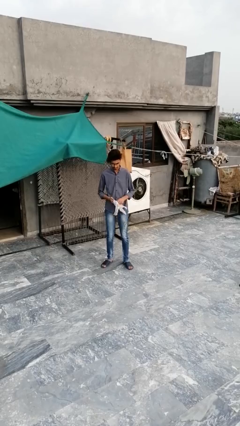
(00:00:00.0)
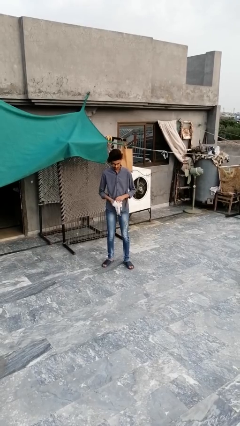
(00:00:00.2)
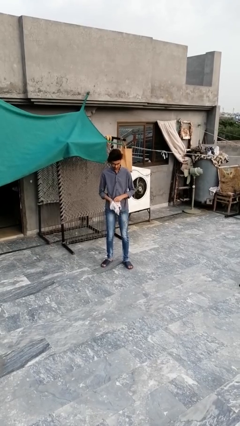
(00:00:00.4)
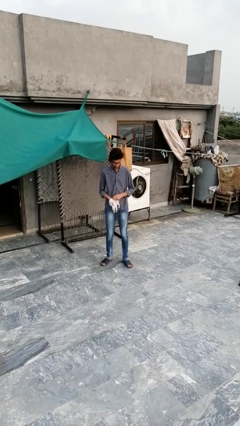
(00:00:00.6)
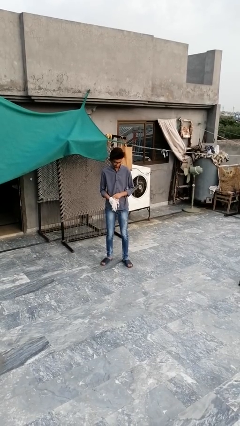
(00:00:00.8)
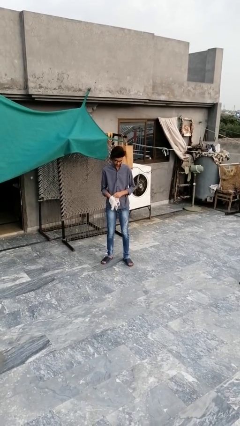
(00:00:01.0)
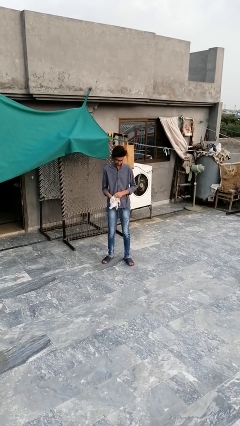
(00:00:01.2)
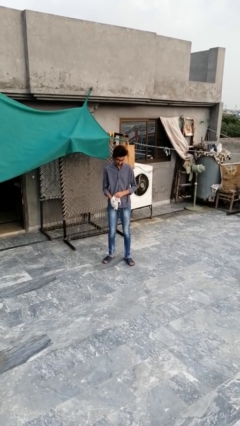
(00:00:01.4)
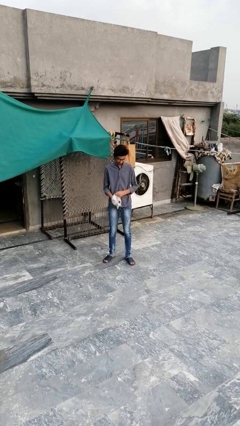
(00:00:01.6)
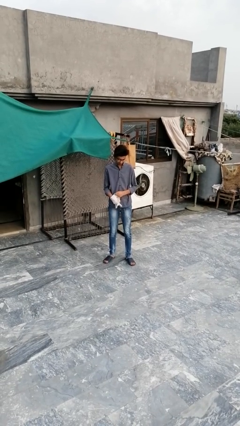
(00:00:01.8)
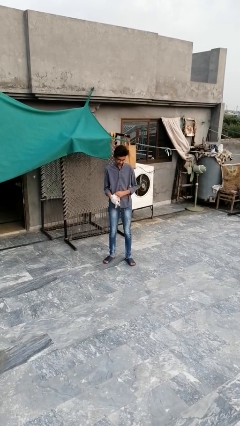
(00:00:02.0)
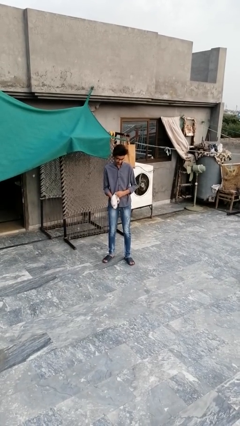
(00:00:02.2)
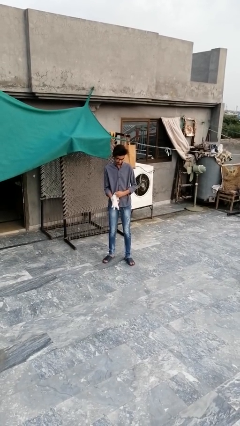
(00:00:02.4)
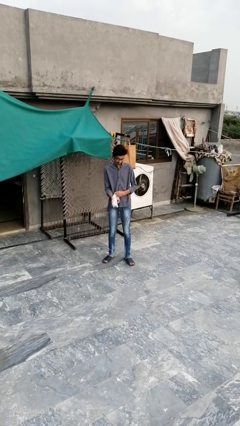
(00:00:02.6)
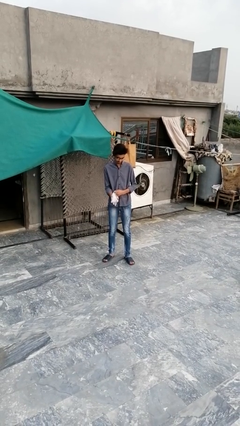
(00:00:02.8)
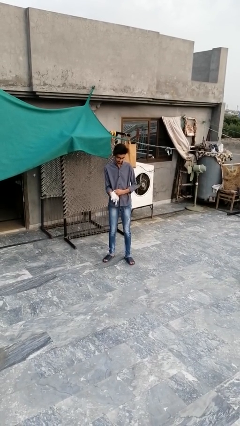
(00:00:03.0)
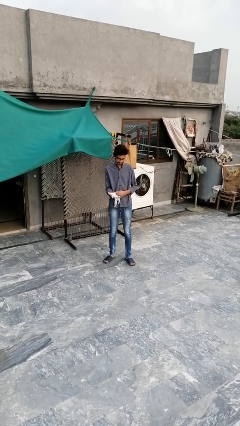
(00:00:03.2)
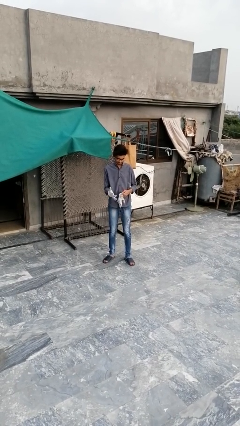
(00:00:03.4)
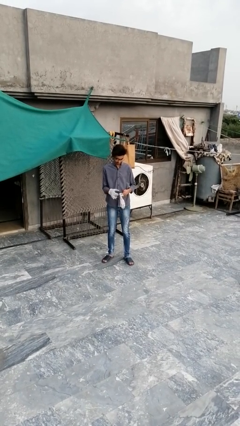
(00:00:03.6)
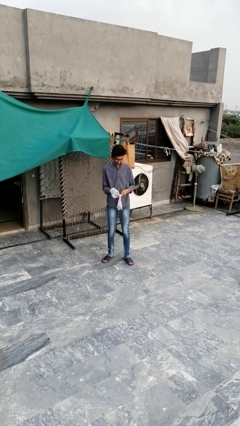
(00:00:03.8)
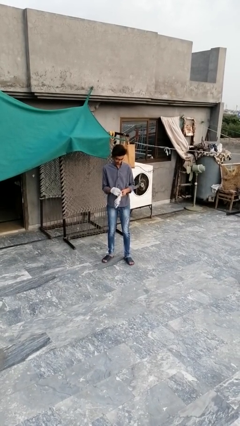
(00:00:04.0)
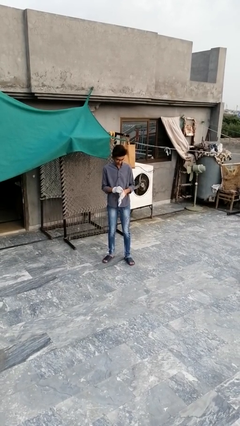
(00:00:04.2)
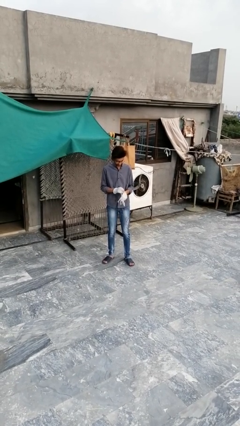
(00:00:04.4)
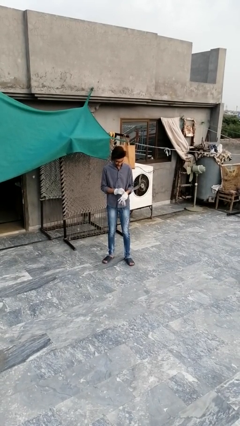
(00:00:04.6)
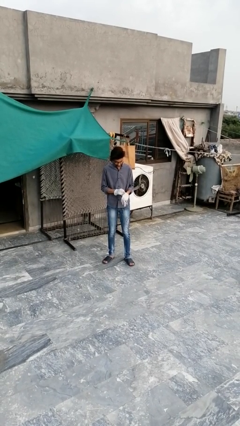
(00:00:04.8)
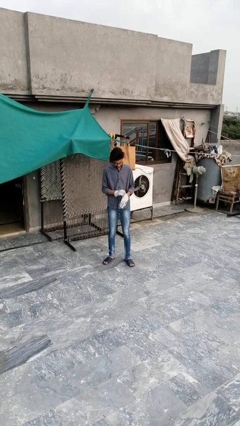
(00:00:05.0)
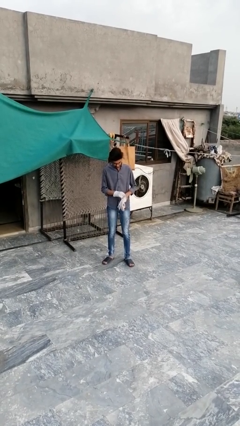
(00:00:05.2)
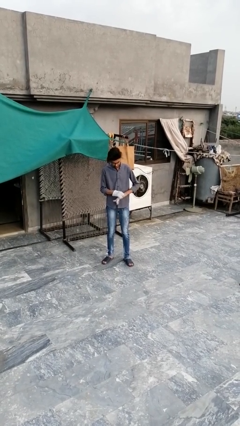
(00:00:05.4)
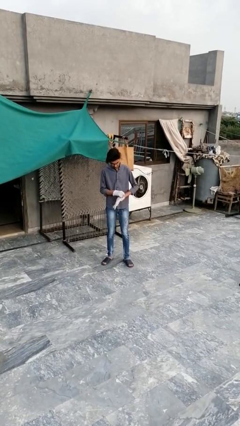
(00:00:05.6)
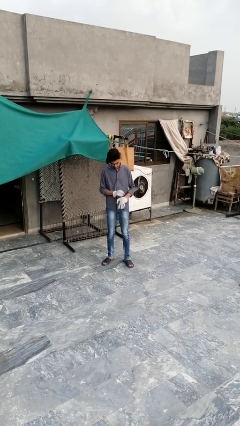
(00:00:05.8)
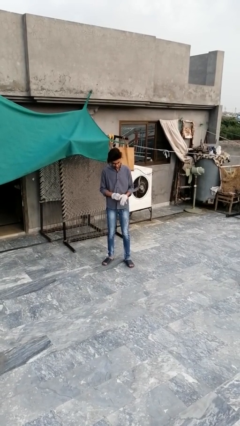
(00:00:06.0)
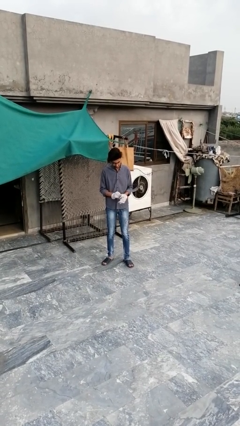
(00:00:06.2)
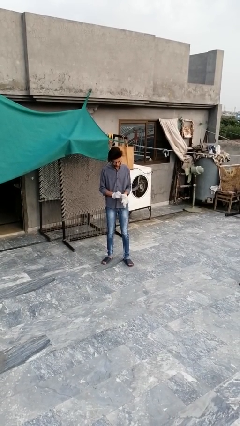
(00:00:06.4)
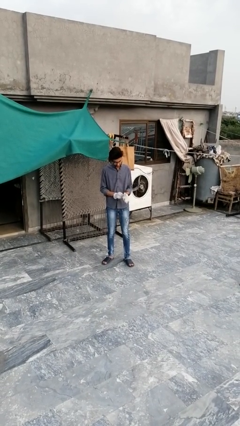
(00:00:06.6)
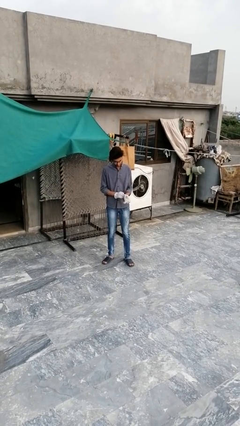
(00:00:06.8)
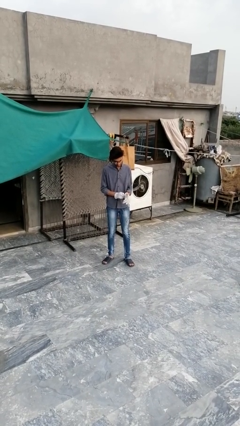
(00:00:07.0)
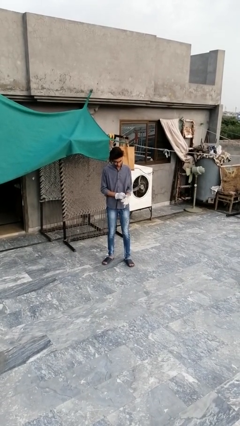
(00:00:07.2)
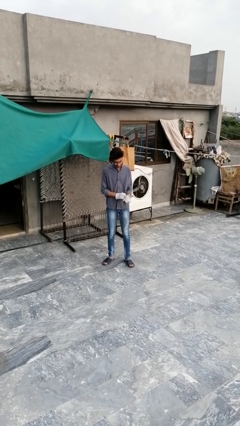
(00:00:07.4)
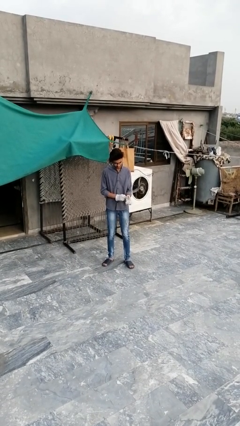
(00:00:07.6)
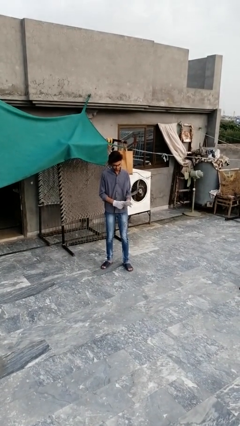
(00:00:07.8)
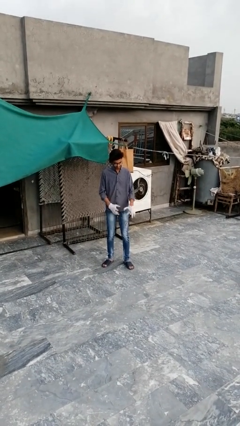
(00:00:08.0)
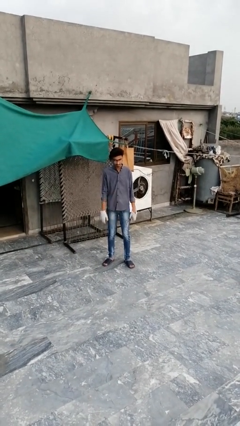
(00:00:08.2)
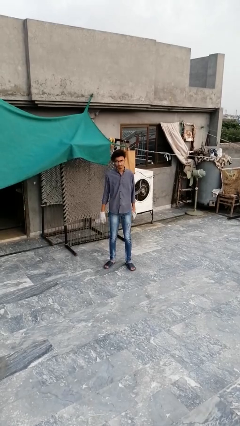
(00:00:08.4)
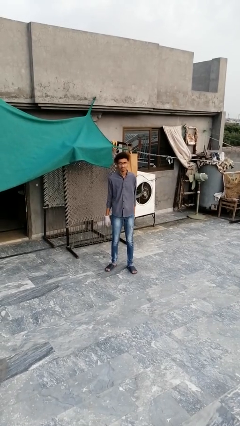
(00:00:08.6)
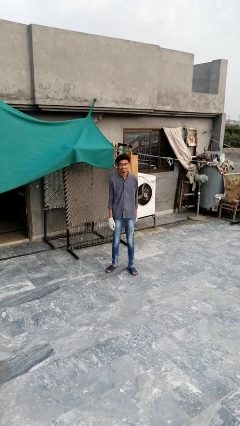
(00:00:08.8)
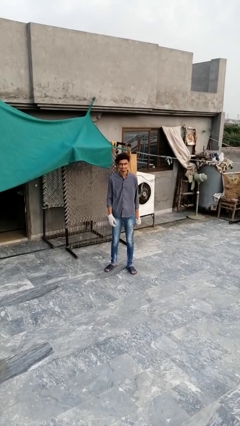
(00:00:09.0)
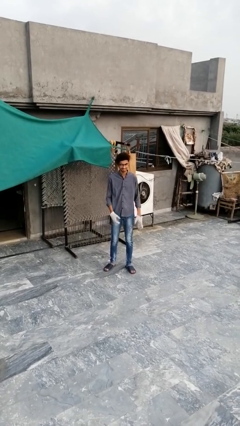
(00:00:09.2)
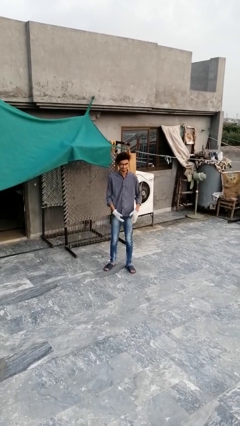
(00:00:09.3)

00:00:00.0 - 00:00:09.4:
person puts on gloves

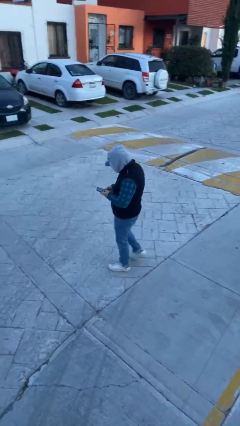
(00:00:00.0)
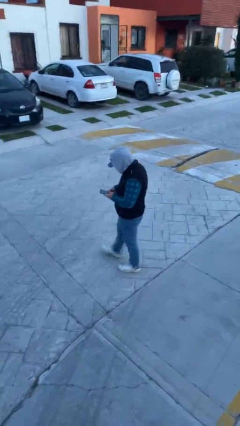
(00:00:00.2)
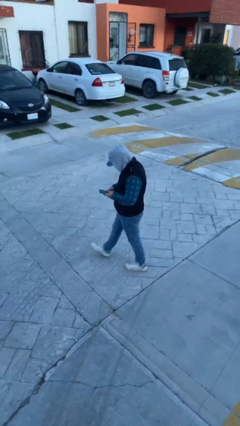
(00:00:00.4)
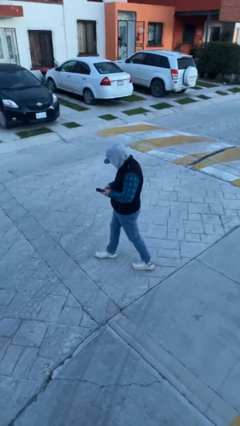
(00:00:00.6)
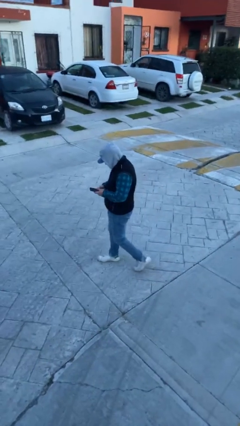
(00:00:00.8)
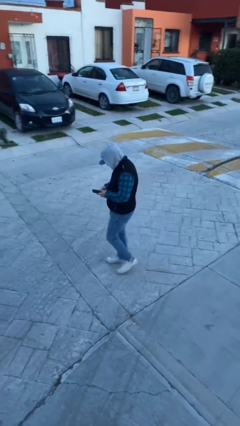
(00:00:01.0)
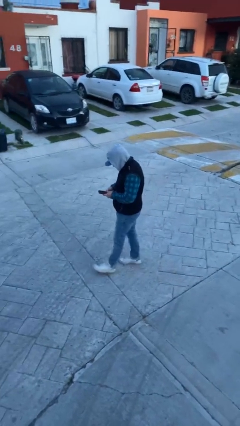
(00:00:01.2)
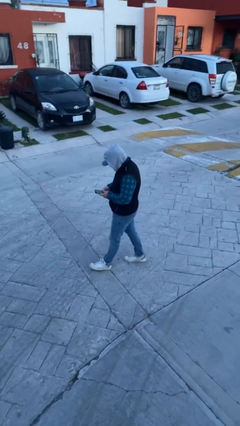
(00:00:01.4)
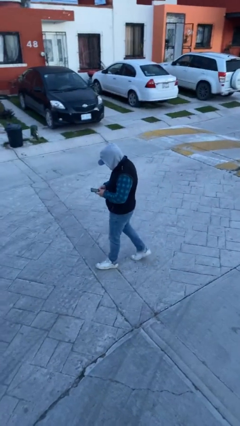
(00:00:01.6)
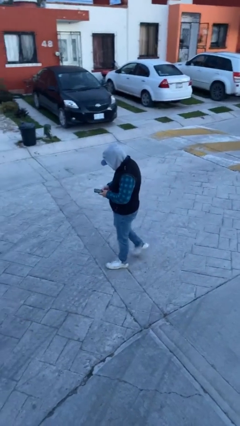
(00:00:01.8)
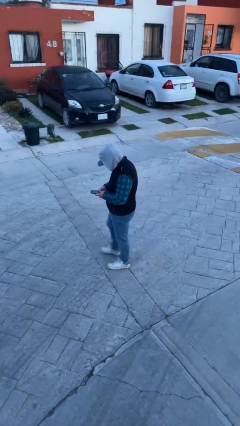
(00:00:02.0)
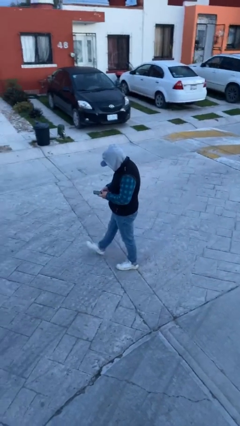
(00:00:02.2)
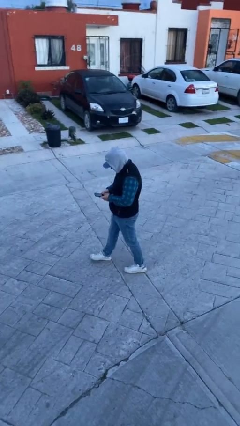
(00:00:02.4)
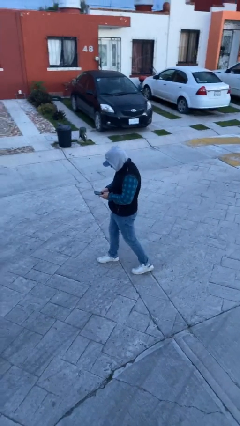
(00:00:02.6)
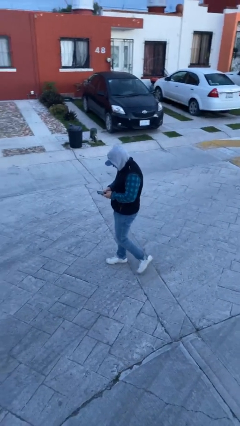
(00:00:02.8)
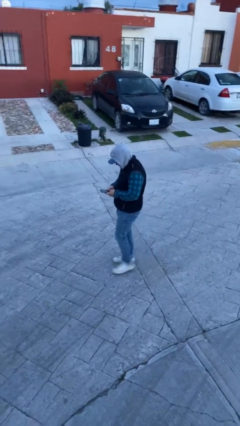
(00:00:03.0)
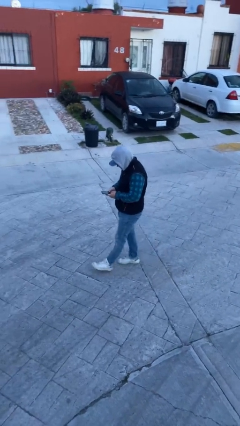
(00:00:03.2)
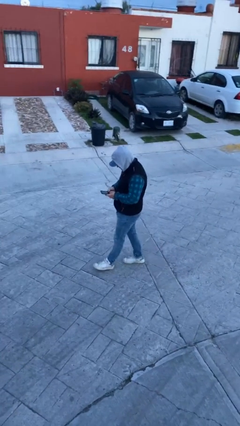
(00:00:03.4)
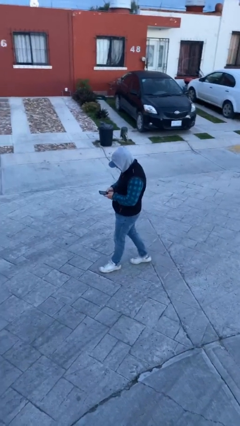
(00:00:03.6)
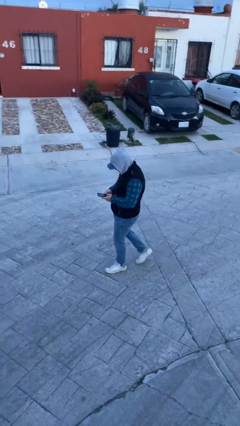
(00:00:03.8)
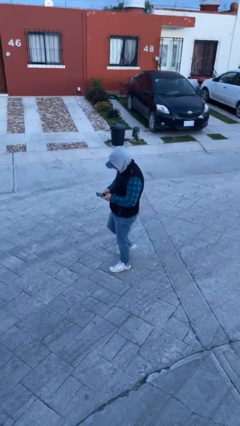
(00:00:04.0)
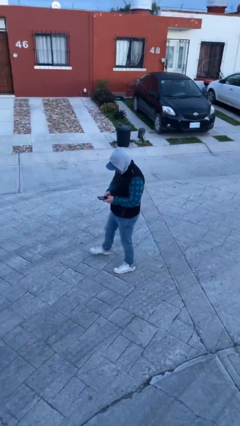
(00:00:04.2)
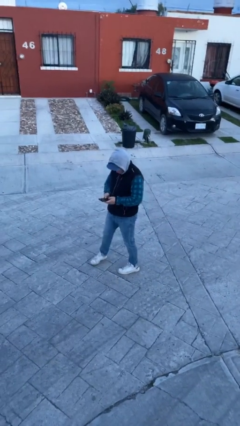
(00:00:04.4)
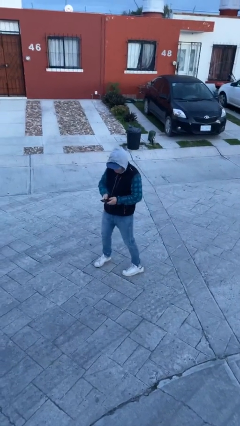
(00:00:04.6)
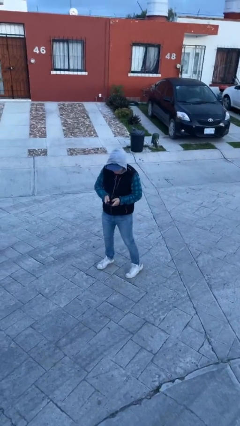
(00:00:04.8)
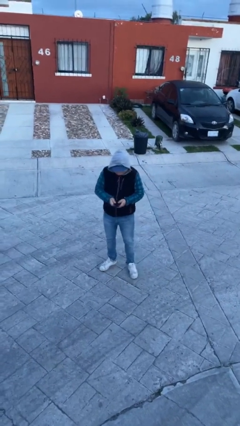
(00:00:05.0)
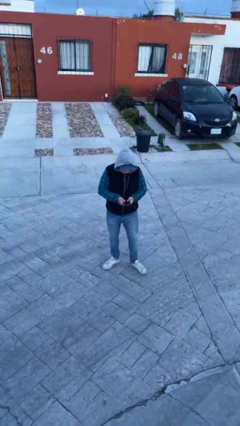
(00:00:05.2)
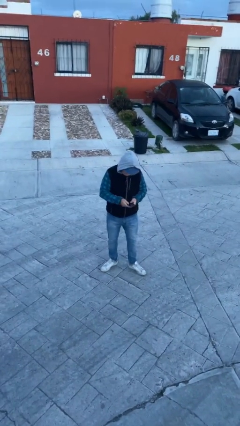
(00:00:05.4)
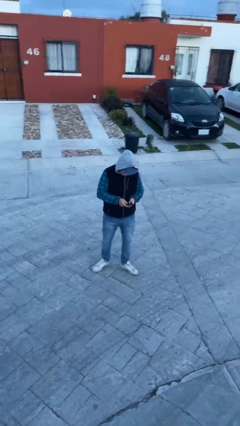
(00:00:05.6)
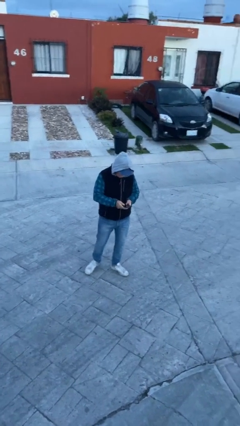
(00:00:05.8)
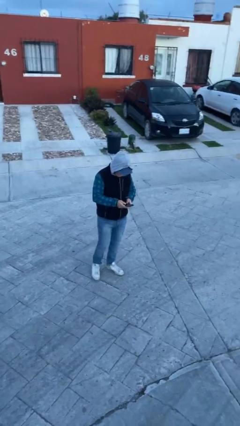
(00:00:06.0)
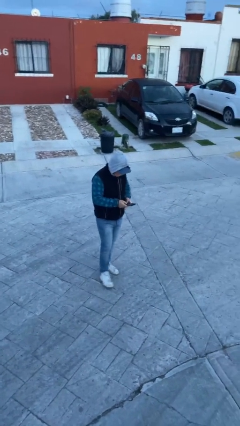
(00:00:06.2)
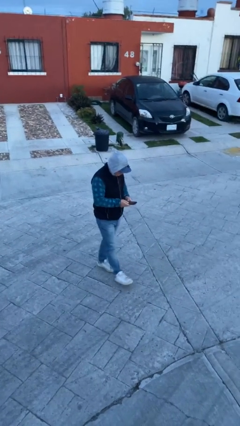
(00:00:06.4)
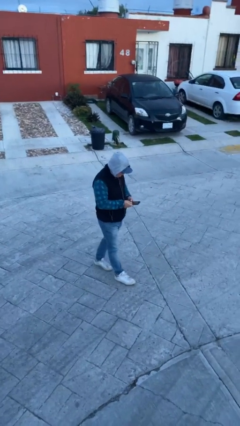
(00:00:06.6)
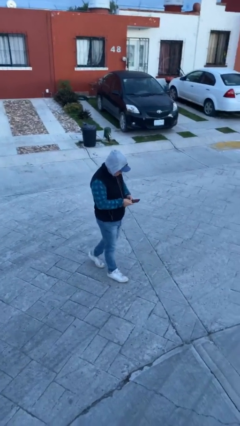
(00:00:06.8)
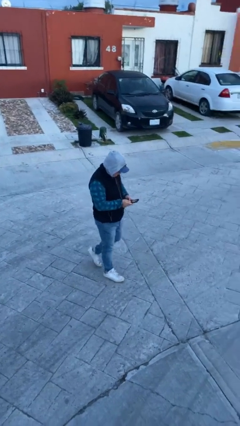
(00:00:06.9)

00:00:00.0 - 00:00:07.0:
person texts on phone

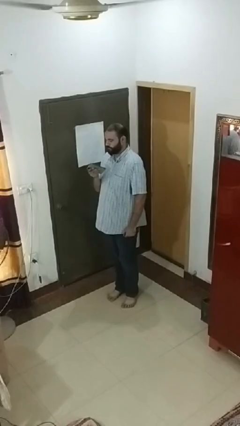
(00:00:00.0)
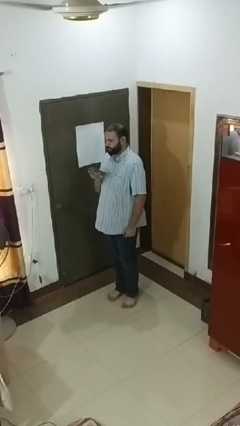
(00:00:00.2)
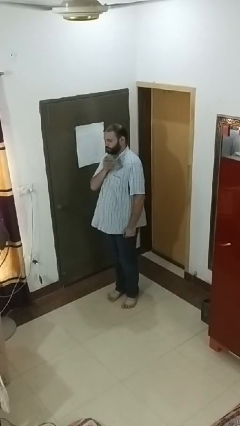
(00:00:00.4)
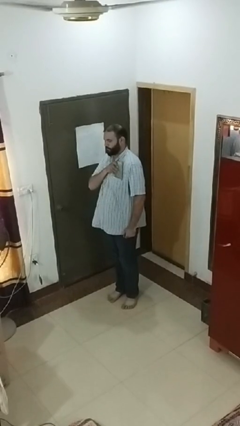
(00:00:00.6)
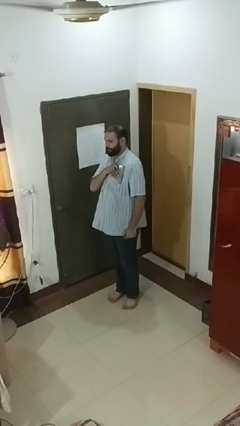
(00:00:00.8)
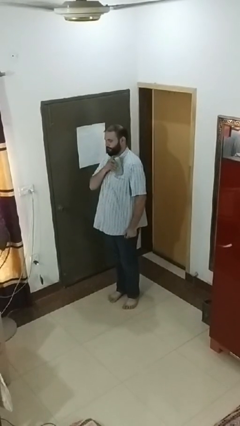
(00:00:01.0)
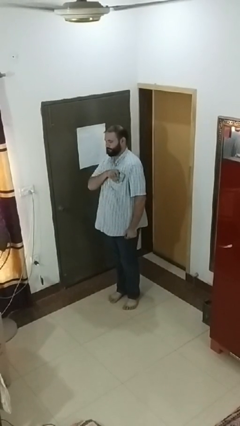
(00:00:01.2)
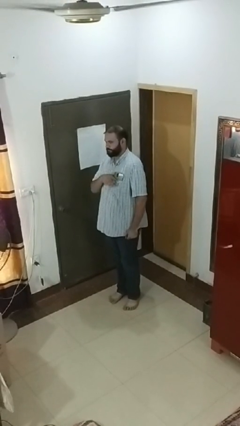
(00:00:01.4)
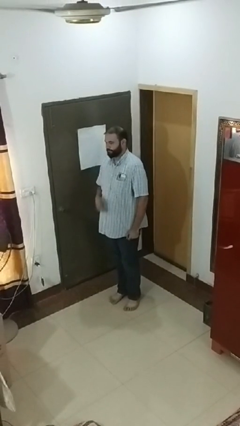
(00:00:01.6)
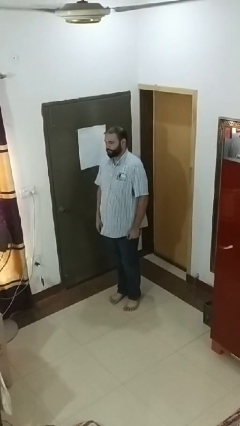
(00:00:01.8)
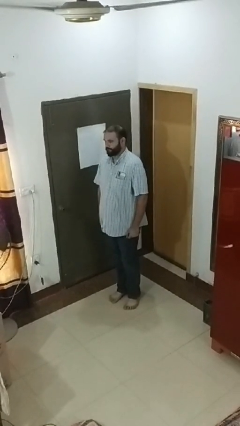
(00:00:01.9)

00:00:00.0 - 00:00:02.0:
person puts phone into pocket
